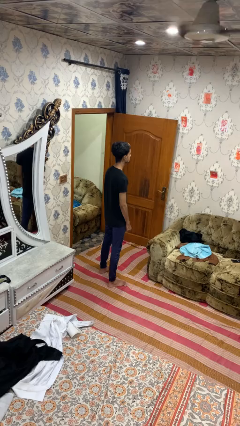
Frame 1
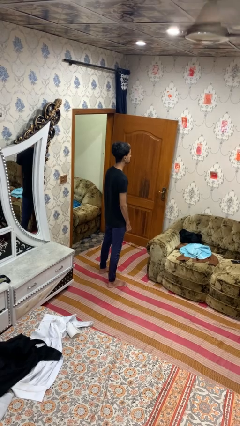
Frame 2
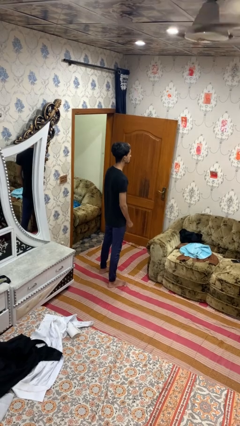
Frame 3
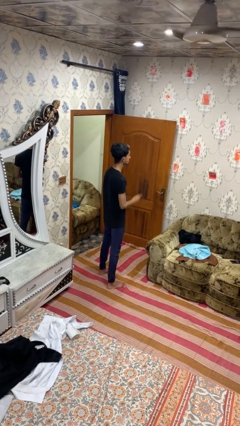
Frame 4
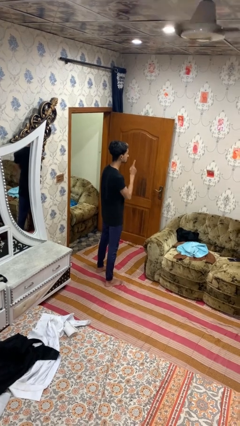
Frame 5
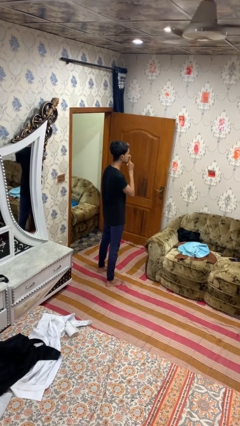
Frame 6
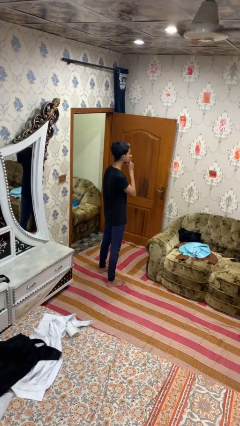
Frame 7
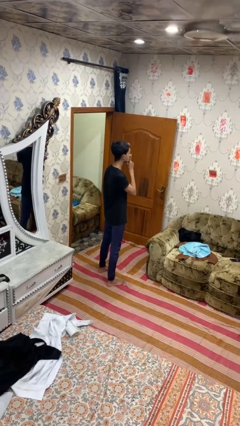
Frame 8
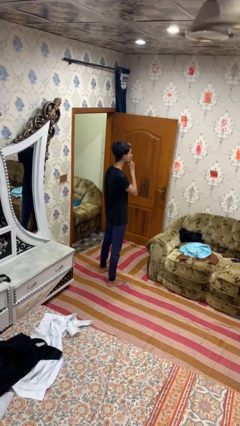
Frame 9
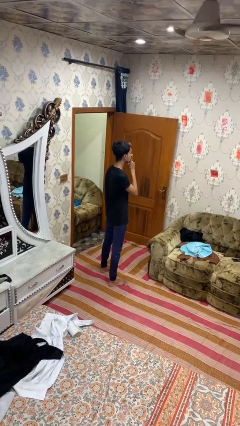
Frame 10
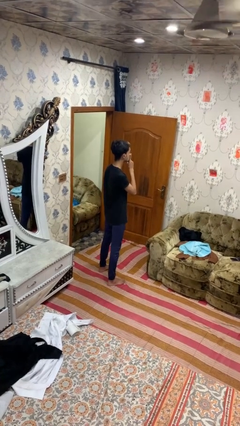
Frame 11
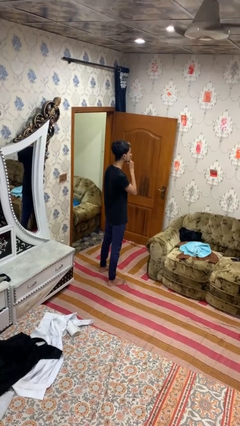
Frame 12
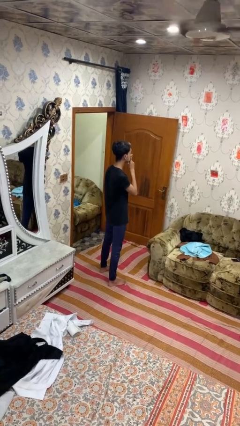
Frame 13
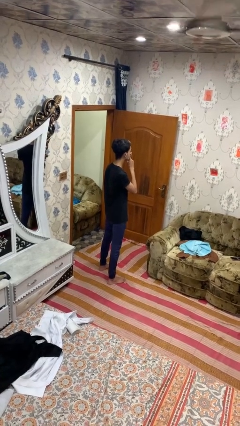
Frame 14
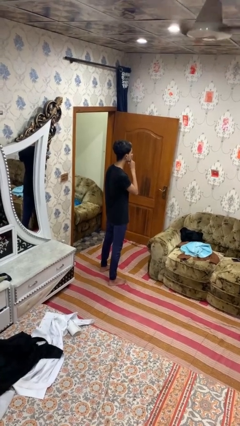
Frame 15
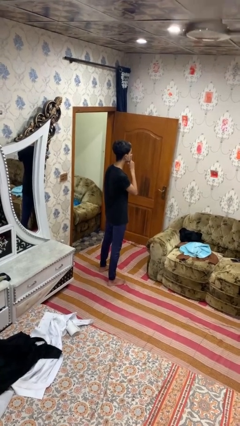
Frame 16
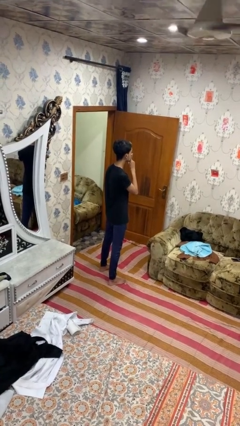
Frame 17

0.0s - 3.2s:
person gestures be quiet

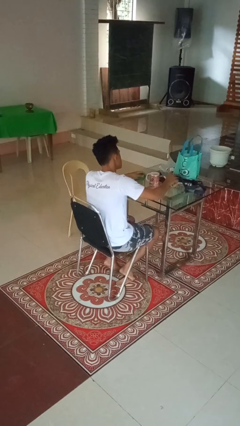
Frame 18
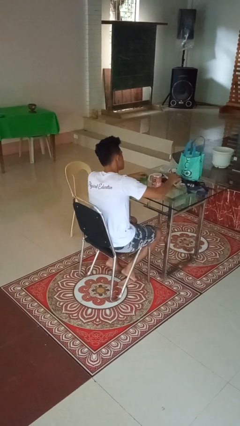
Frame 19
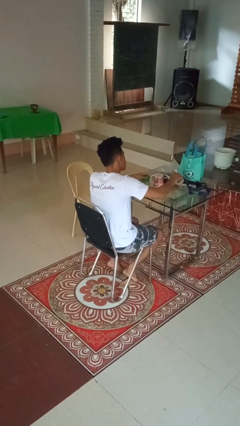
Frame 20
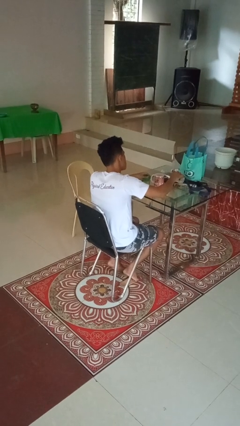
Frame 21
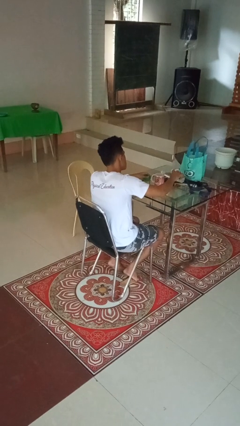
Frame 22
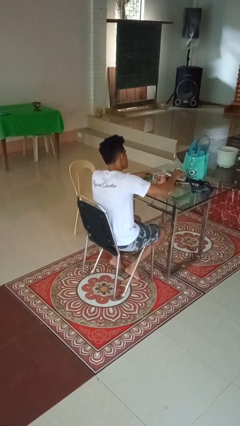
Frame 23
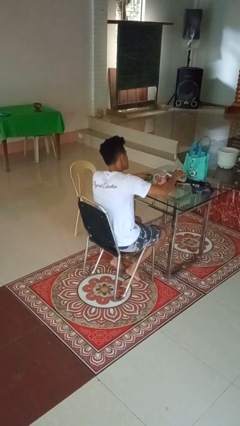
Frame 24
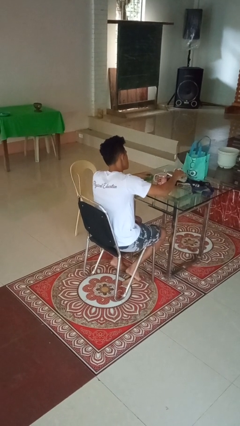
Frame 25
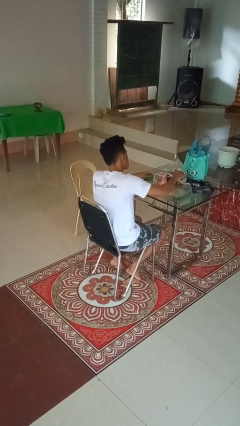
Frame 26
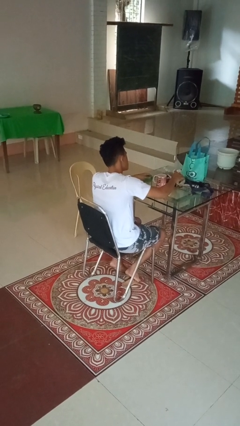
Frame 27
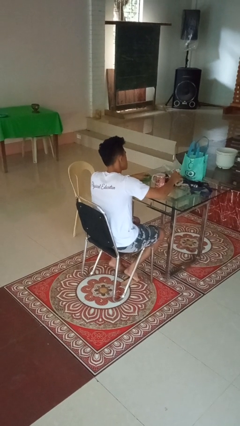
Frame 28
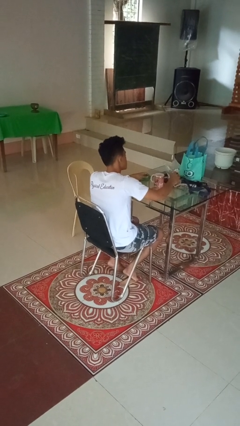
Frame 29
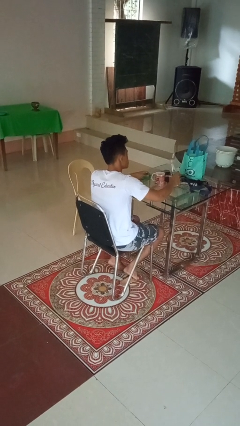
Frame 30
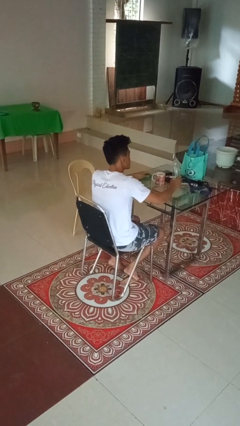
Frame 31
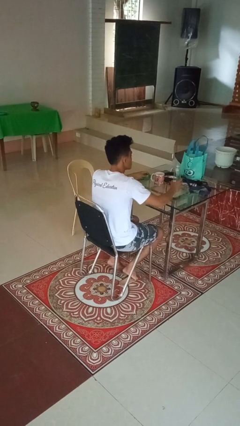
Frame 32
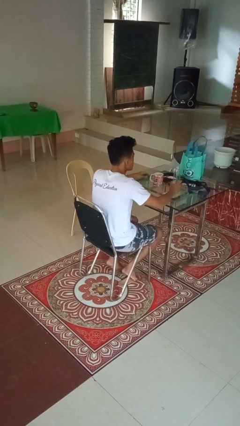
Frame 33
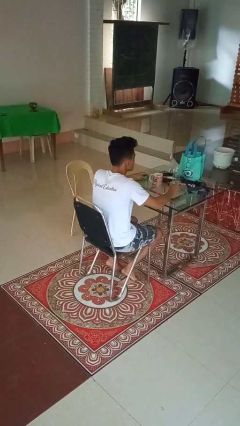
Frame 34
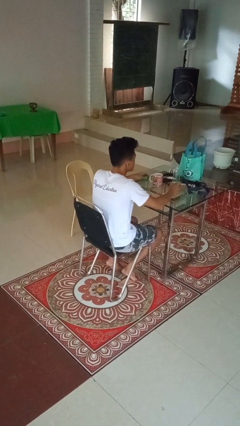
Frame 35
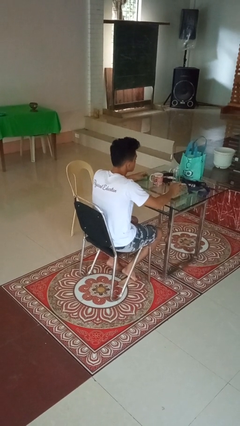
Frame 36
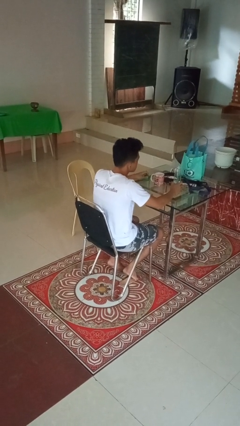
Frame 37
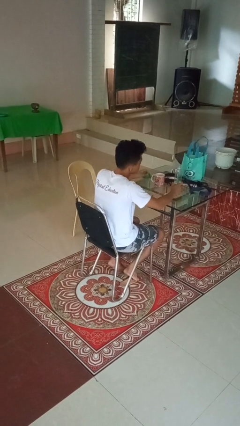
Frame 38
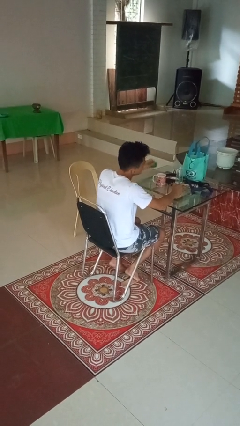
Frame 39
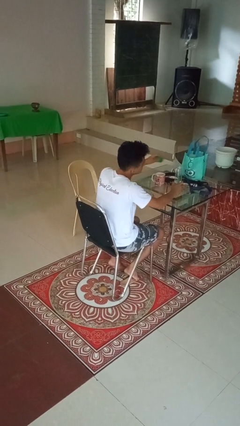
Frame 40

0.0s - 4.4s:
person pours liquid into cup

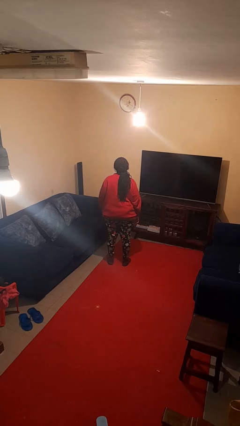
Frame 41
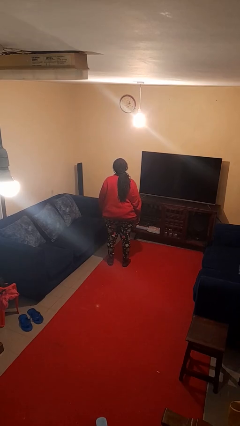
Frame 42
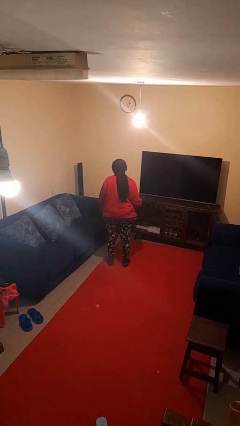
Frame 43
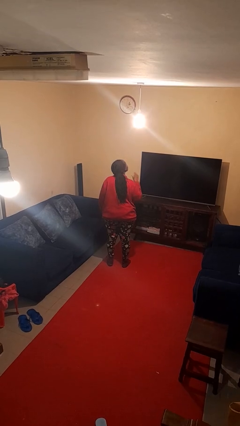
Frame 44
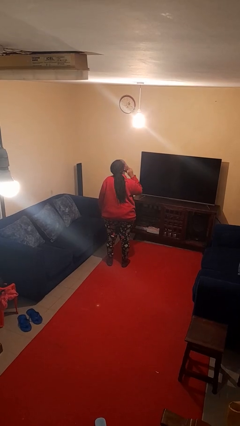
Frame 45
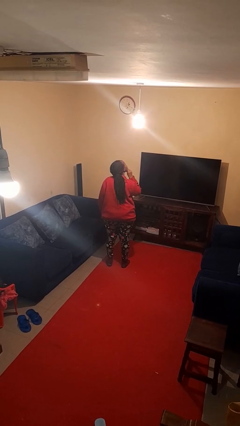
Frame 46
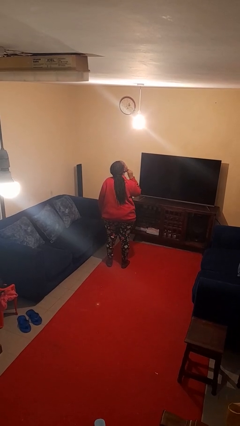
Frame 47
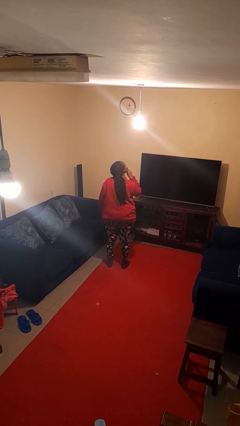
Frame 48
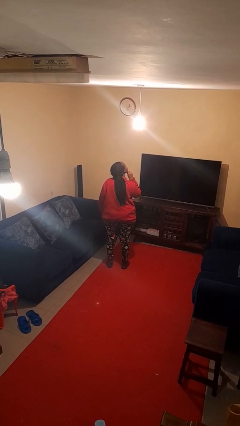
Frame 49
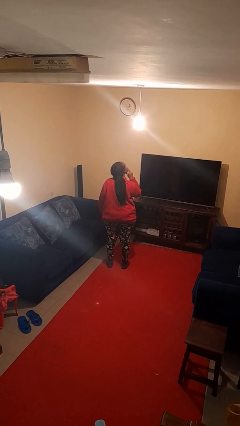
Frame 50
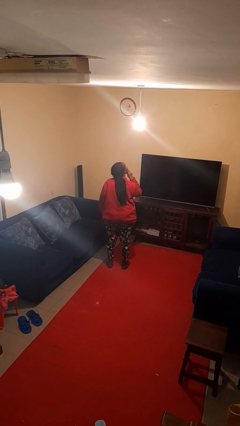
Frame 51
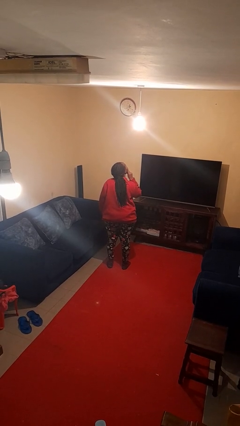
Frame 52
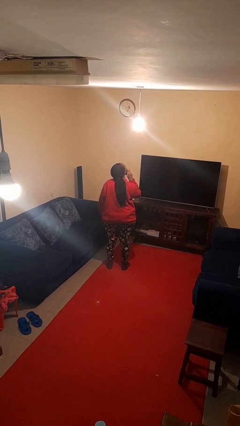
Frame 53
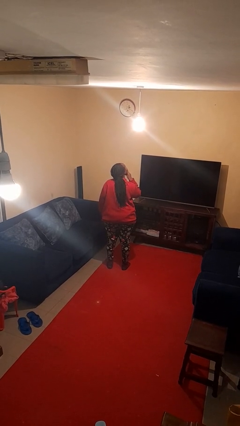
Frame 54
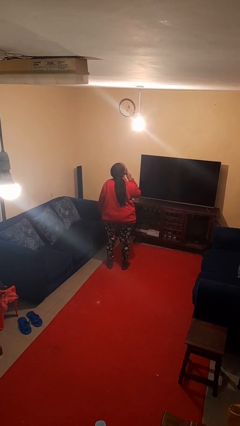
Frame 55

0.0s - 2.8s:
person strokes chin

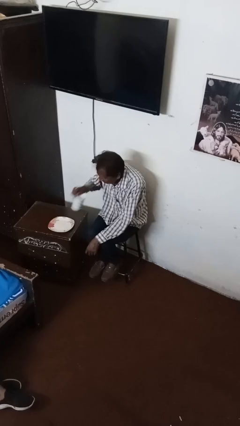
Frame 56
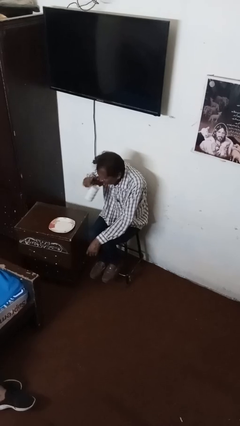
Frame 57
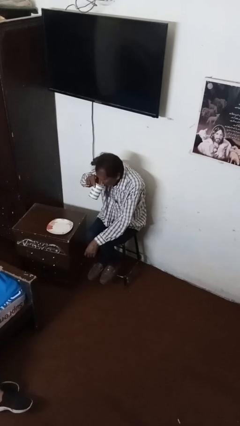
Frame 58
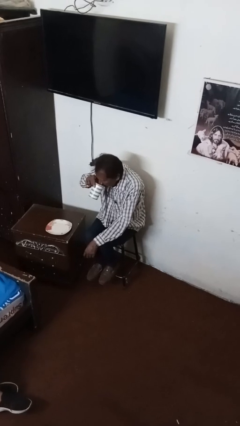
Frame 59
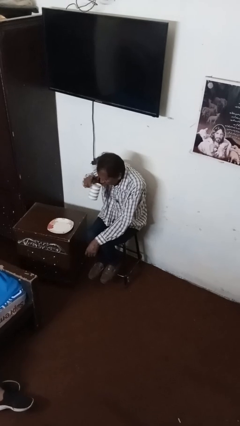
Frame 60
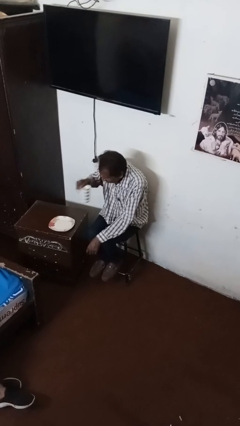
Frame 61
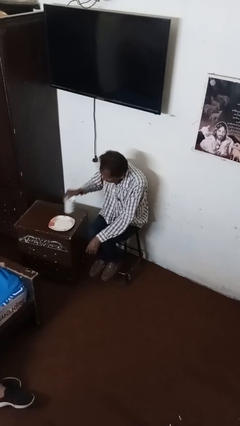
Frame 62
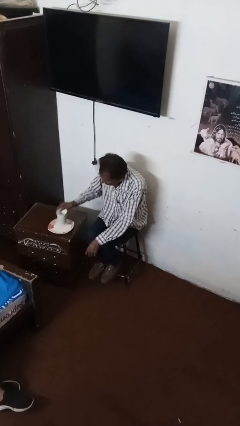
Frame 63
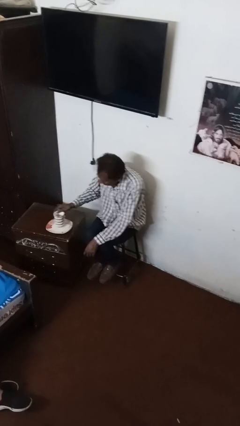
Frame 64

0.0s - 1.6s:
person drinks from mug

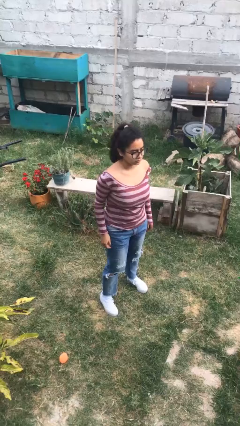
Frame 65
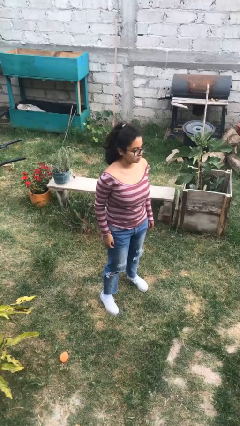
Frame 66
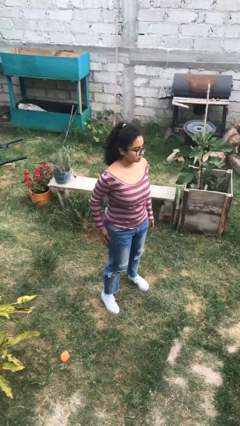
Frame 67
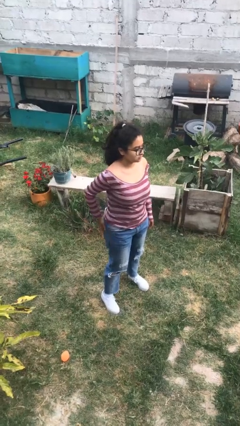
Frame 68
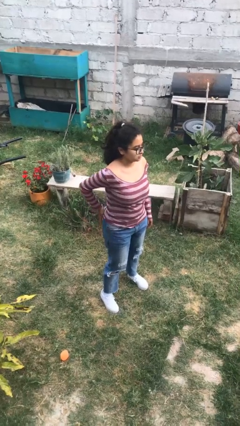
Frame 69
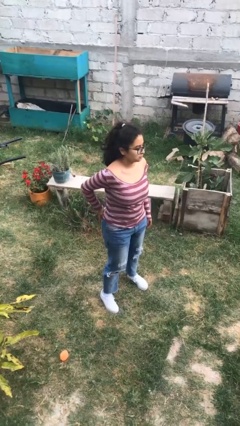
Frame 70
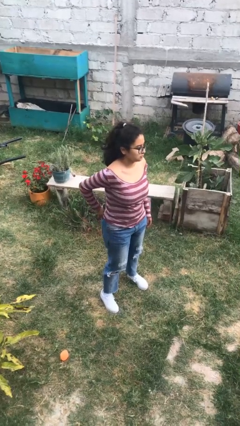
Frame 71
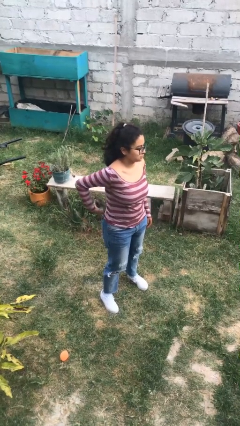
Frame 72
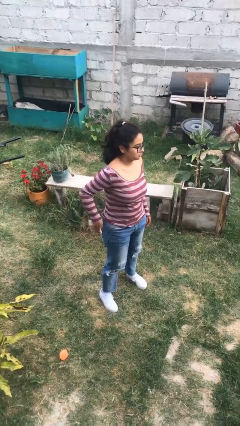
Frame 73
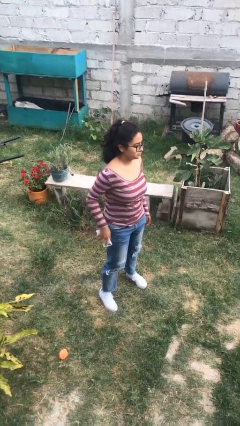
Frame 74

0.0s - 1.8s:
person takes phone from pocket

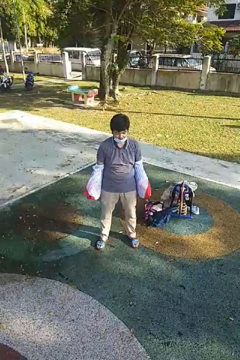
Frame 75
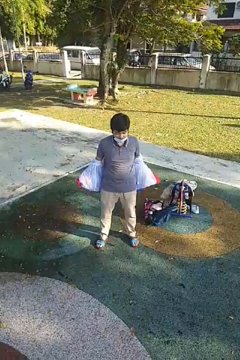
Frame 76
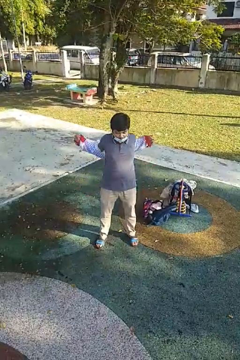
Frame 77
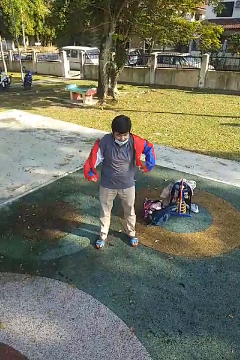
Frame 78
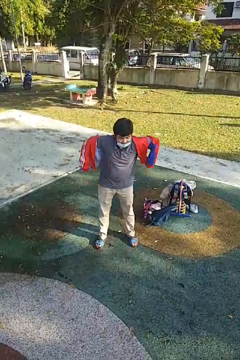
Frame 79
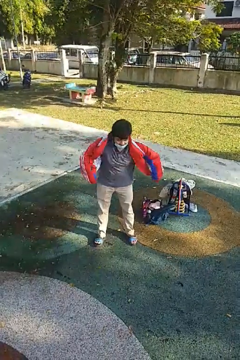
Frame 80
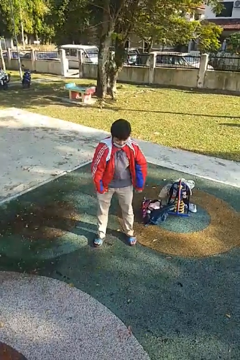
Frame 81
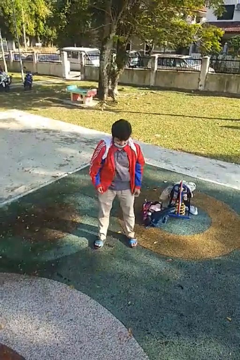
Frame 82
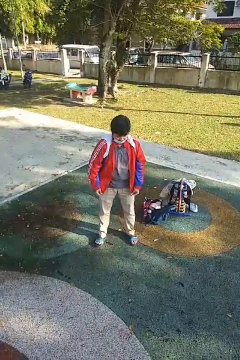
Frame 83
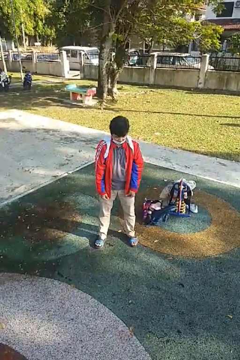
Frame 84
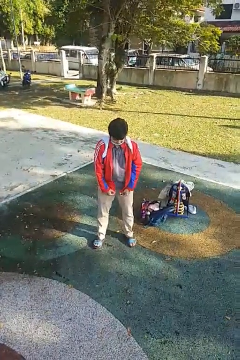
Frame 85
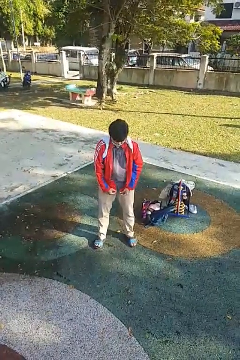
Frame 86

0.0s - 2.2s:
person puts on jacket

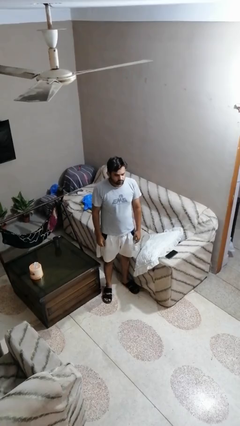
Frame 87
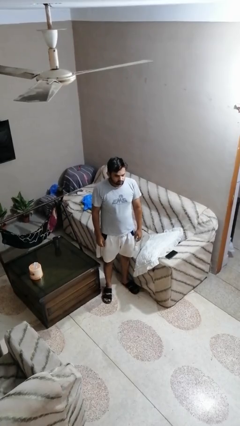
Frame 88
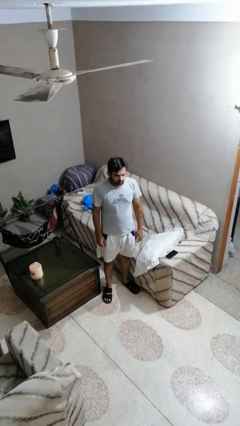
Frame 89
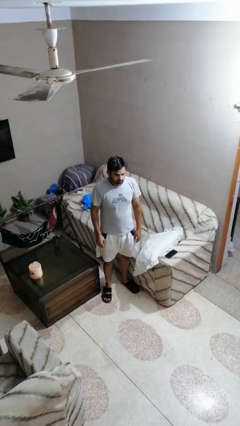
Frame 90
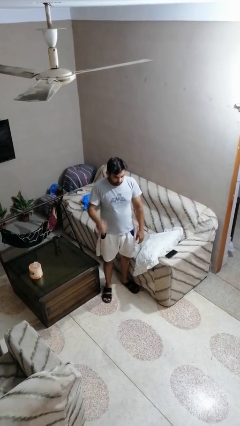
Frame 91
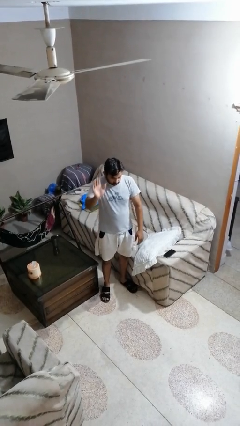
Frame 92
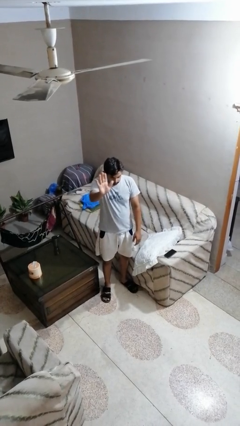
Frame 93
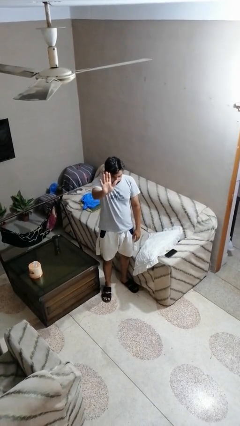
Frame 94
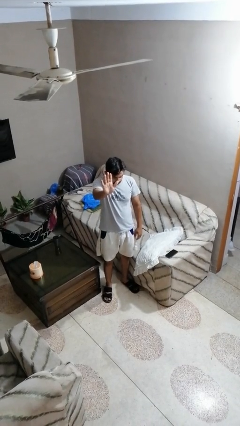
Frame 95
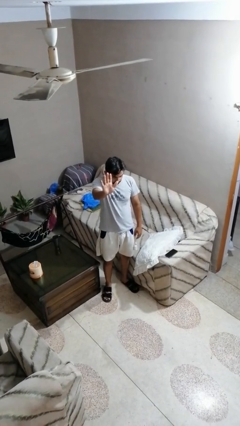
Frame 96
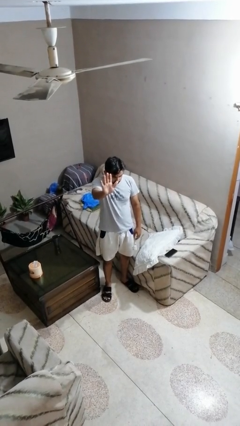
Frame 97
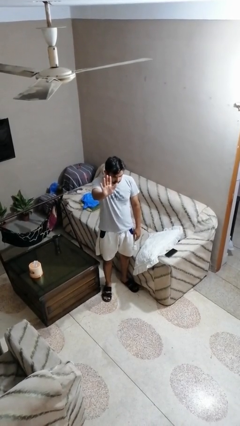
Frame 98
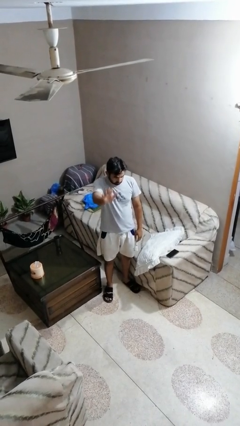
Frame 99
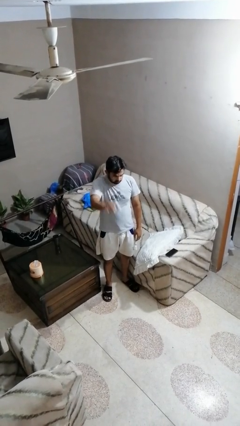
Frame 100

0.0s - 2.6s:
person gestures stop
